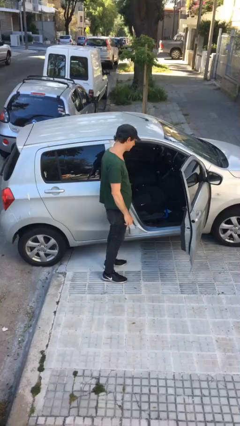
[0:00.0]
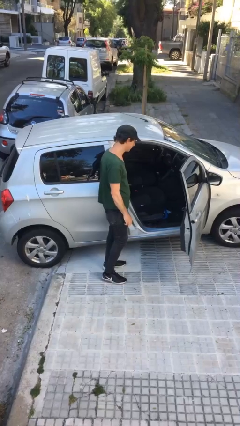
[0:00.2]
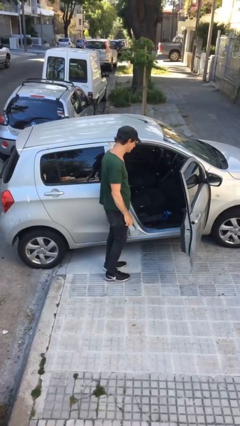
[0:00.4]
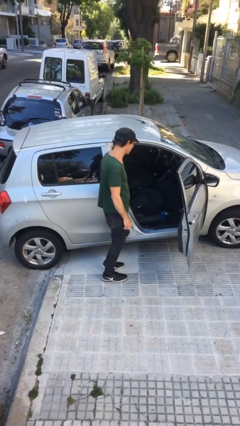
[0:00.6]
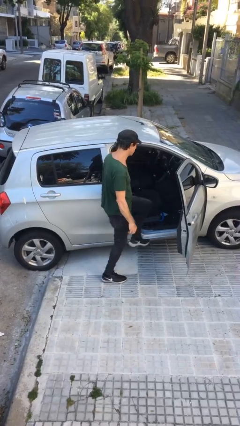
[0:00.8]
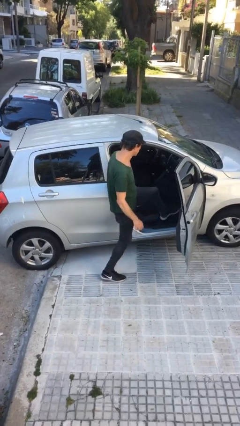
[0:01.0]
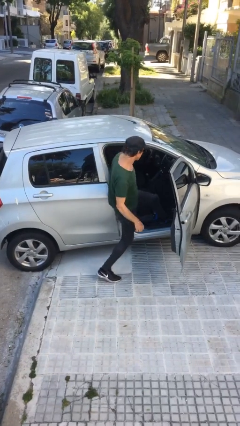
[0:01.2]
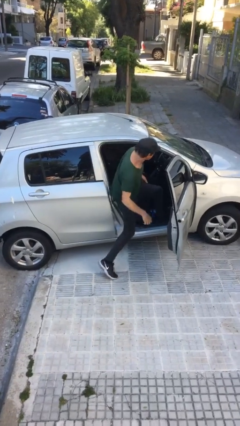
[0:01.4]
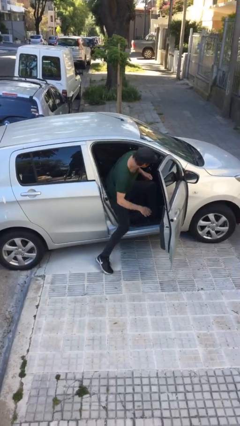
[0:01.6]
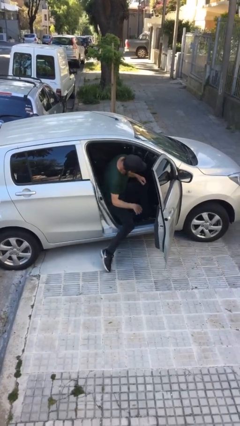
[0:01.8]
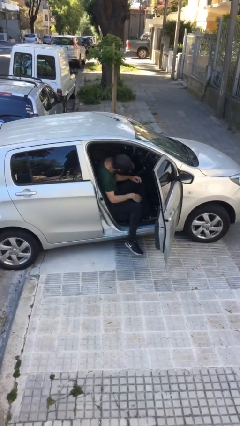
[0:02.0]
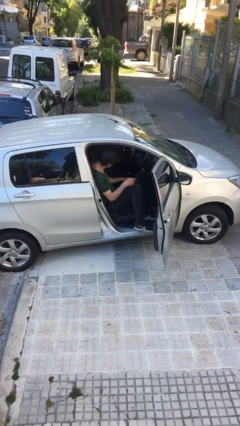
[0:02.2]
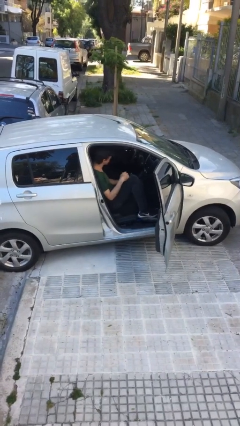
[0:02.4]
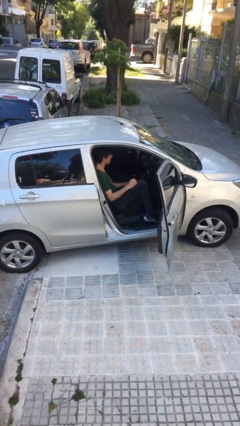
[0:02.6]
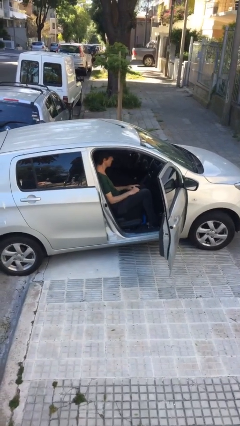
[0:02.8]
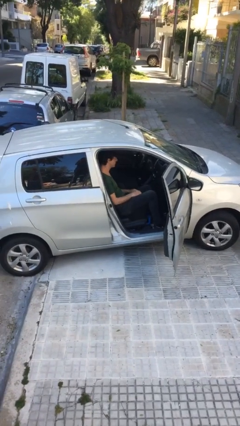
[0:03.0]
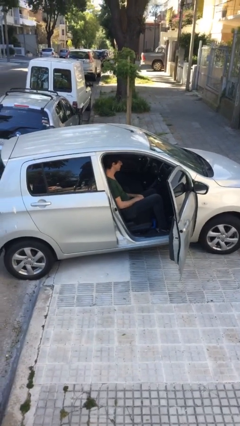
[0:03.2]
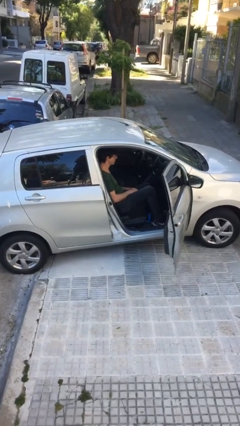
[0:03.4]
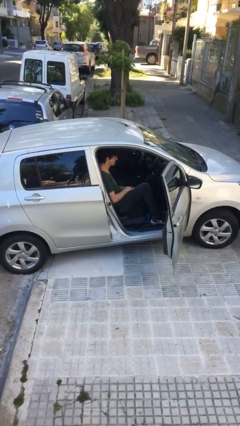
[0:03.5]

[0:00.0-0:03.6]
person enters car

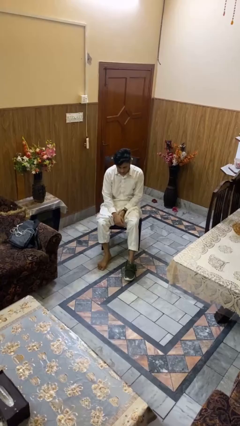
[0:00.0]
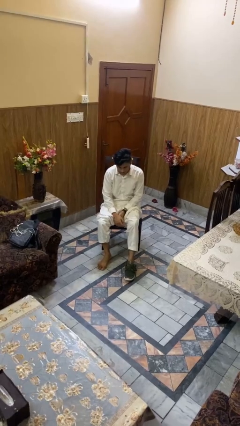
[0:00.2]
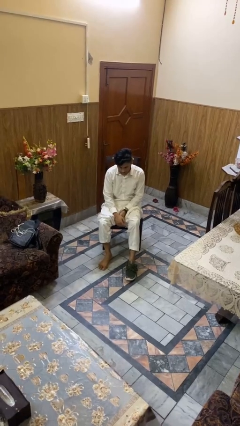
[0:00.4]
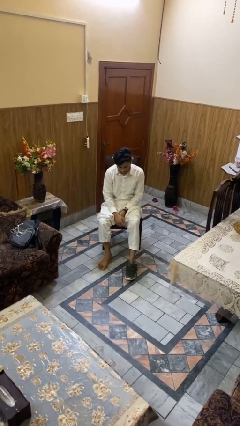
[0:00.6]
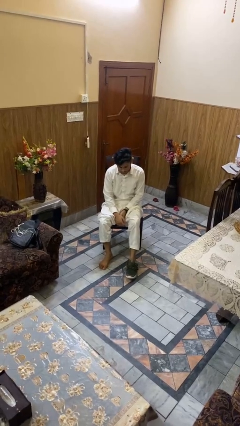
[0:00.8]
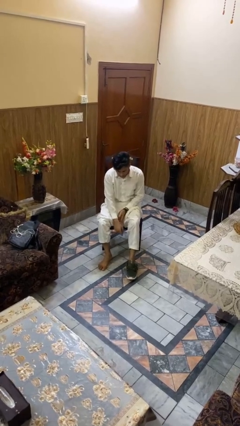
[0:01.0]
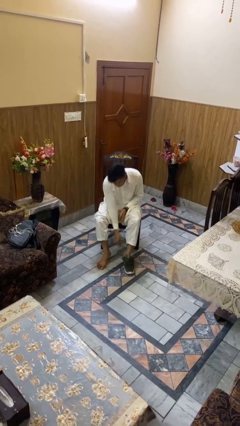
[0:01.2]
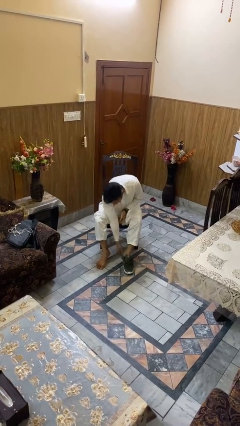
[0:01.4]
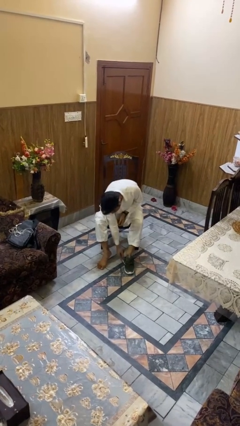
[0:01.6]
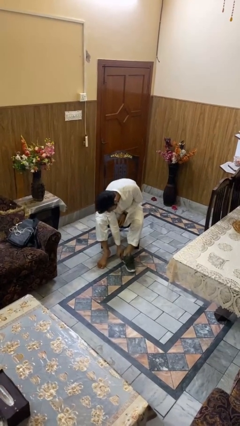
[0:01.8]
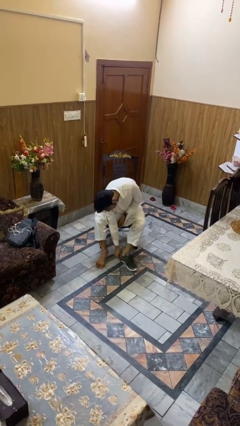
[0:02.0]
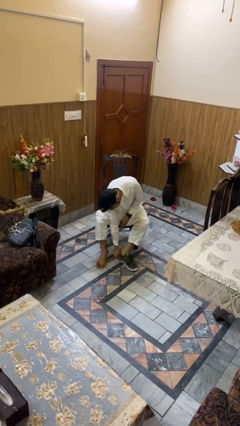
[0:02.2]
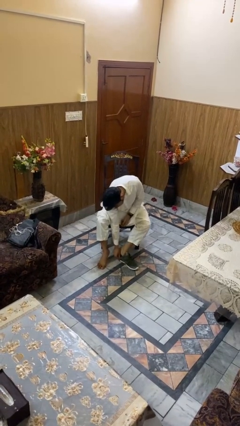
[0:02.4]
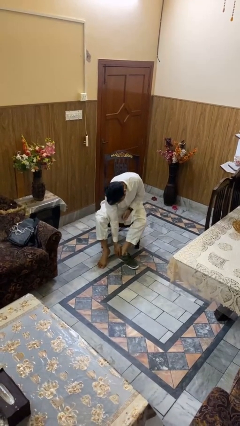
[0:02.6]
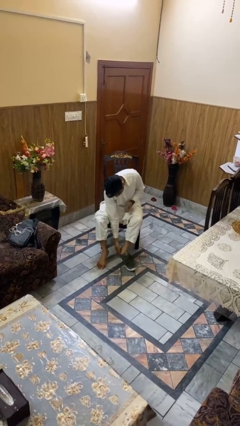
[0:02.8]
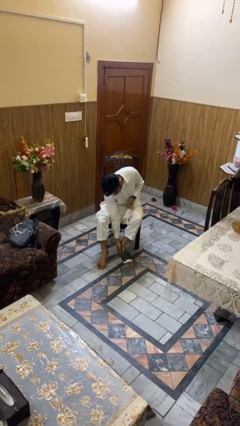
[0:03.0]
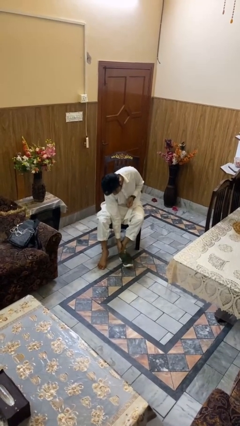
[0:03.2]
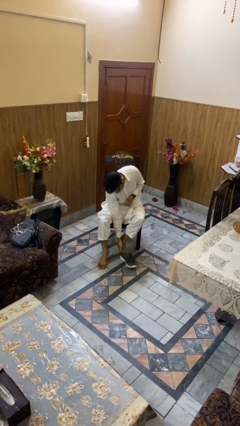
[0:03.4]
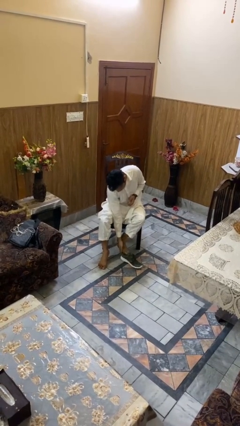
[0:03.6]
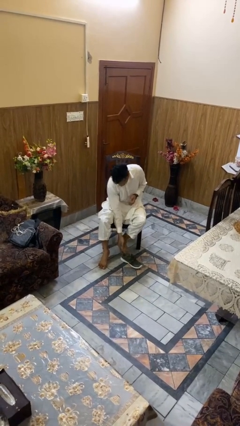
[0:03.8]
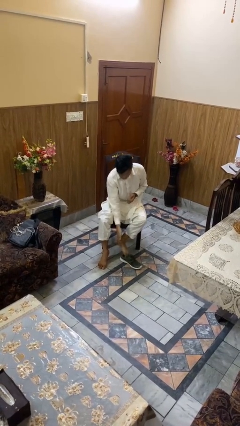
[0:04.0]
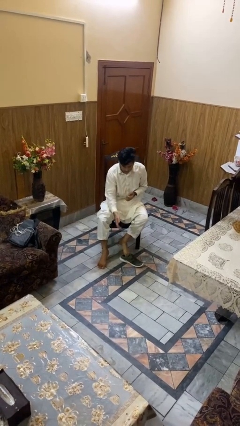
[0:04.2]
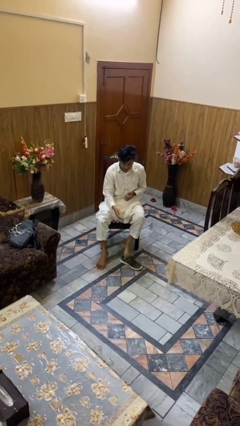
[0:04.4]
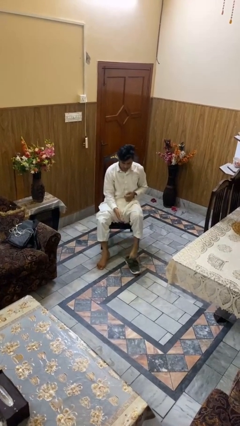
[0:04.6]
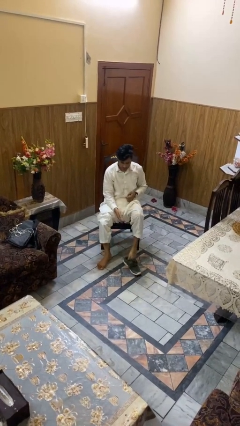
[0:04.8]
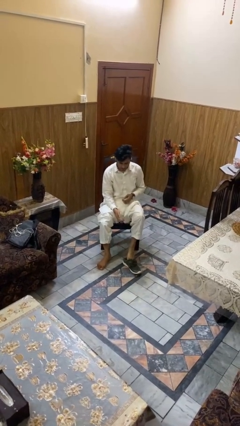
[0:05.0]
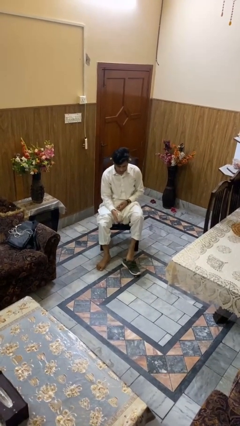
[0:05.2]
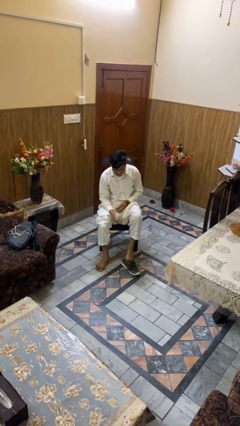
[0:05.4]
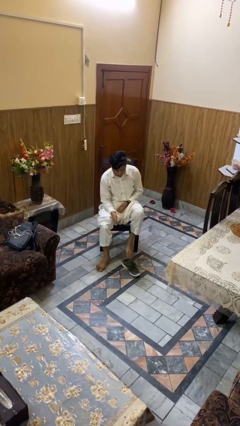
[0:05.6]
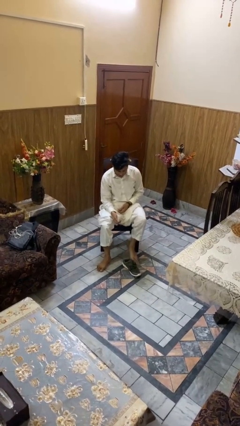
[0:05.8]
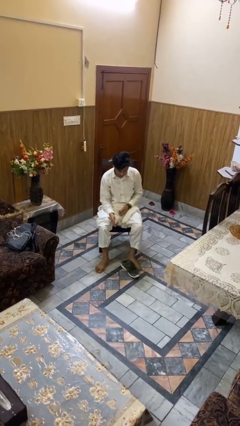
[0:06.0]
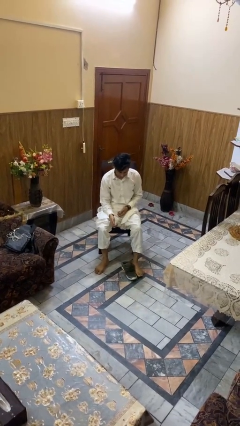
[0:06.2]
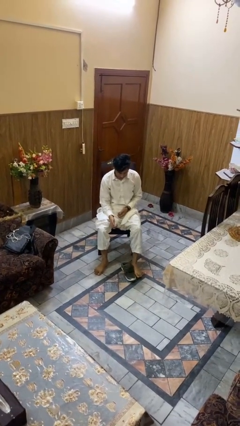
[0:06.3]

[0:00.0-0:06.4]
person takes off shoes

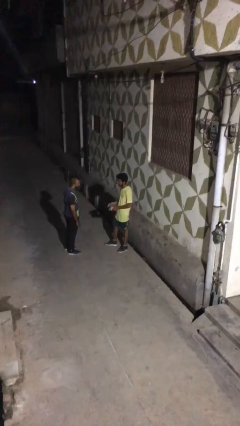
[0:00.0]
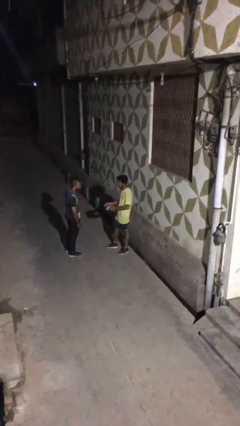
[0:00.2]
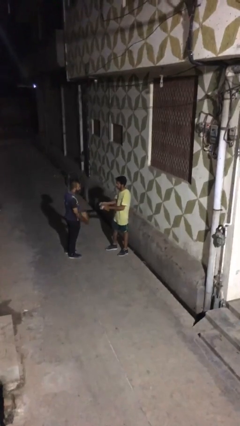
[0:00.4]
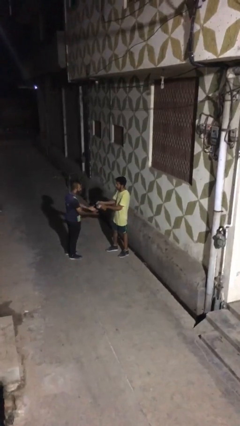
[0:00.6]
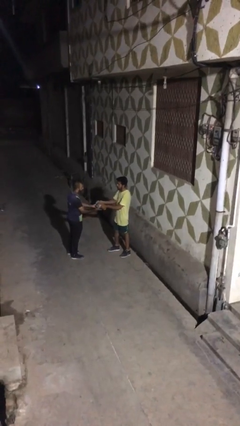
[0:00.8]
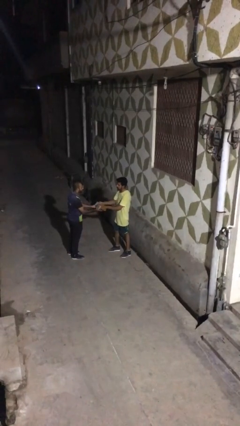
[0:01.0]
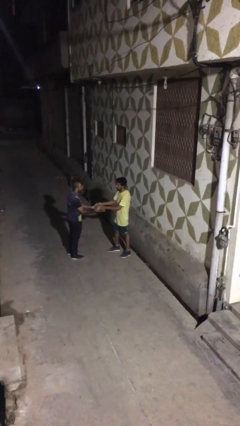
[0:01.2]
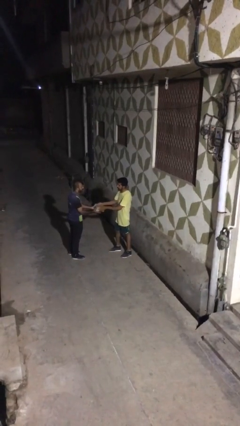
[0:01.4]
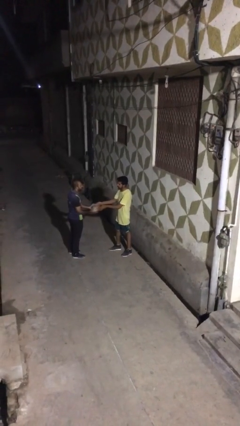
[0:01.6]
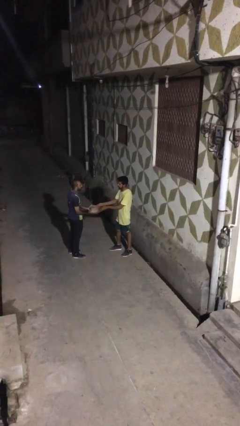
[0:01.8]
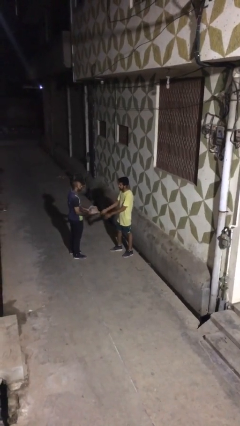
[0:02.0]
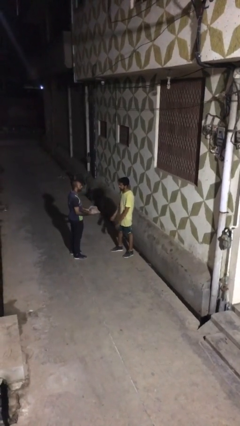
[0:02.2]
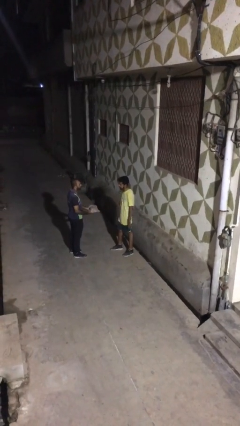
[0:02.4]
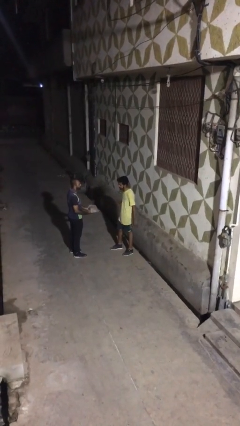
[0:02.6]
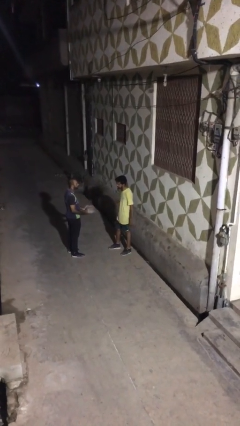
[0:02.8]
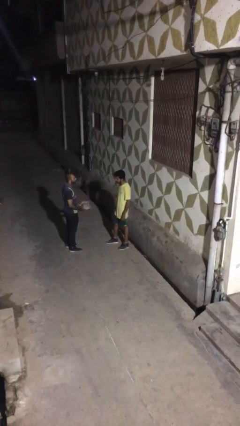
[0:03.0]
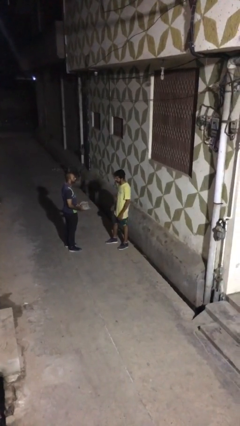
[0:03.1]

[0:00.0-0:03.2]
person transfers object to person

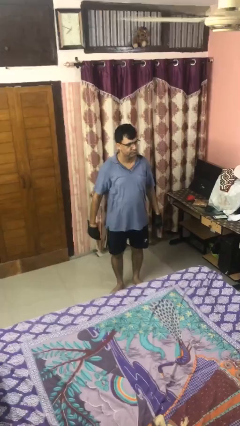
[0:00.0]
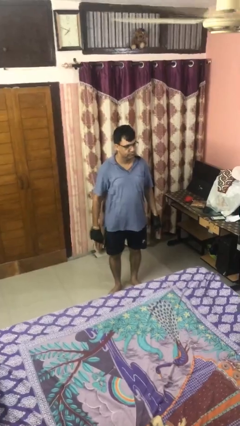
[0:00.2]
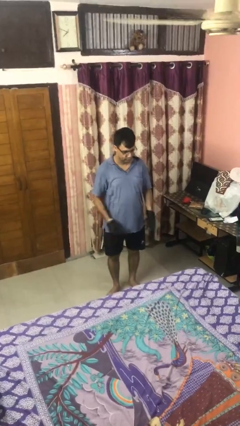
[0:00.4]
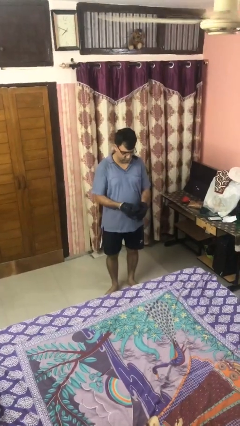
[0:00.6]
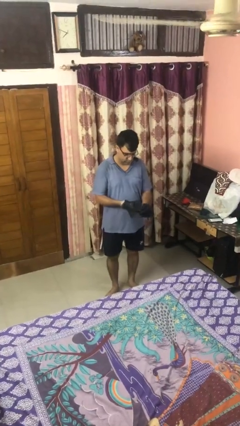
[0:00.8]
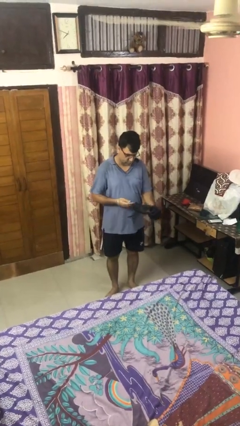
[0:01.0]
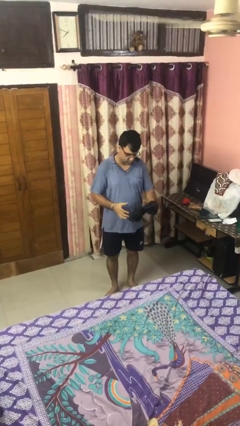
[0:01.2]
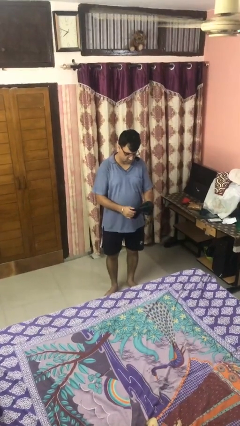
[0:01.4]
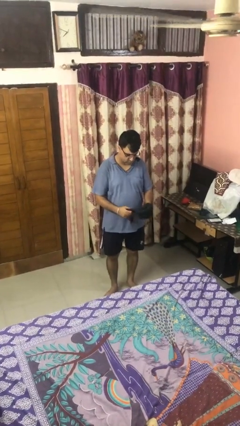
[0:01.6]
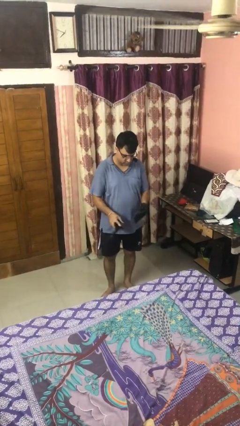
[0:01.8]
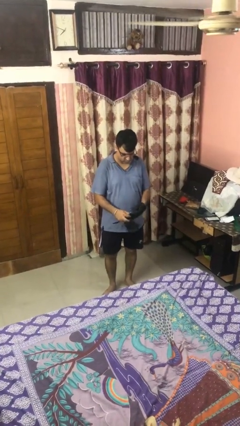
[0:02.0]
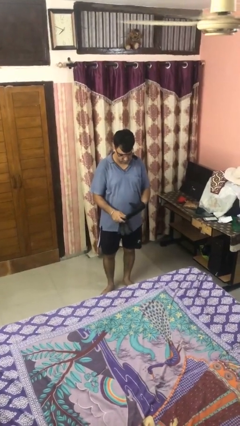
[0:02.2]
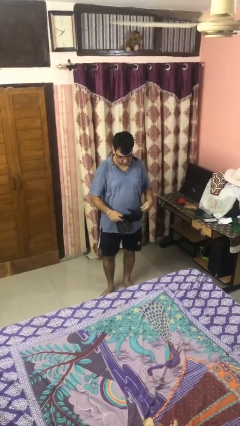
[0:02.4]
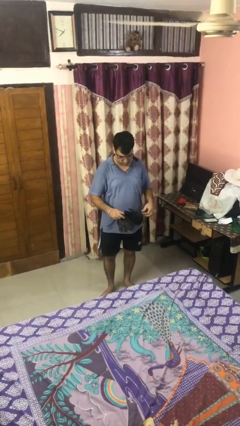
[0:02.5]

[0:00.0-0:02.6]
person takes off gloves

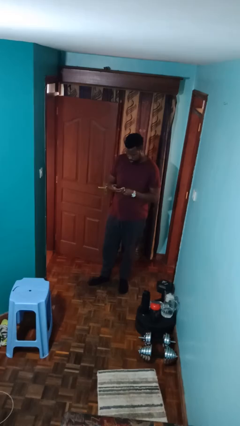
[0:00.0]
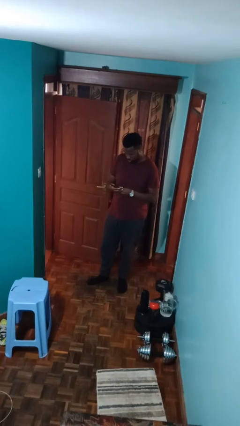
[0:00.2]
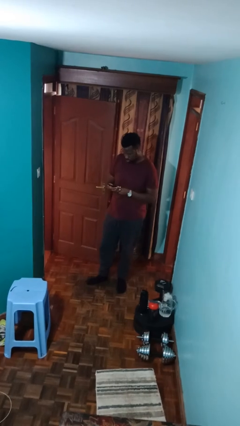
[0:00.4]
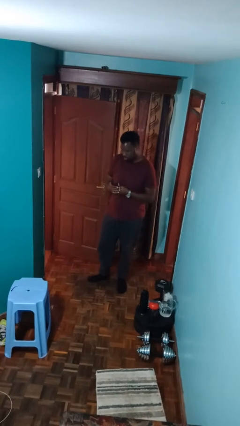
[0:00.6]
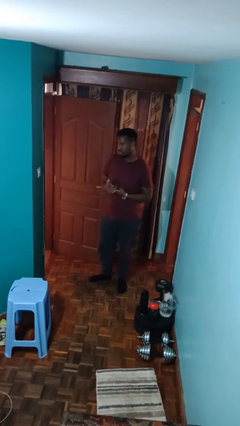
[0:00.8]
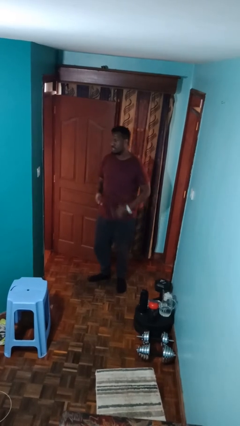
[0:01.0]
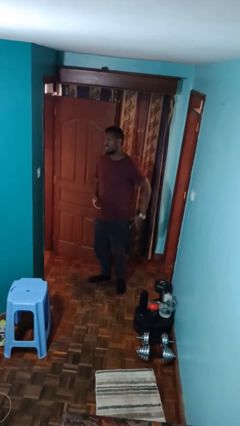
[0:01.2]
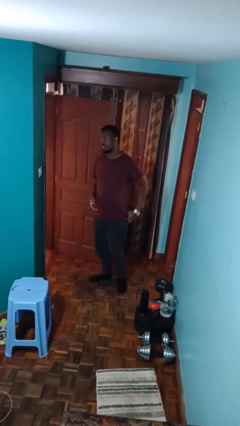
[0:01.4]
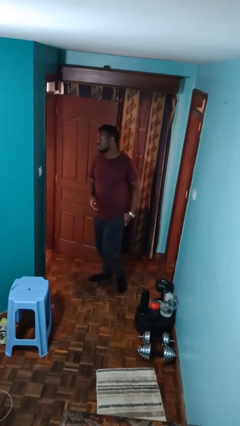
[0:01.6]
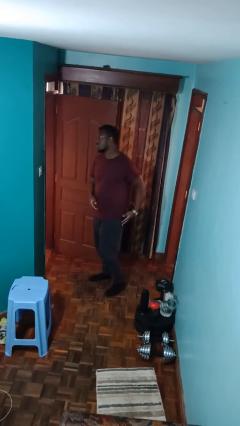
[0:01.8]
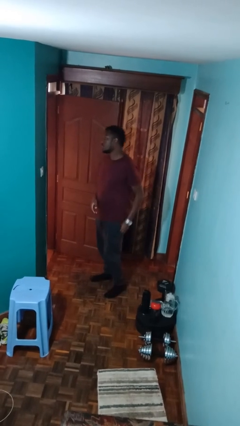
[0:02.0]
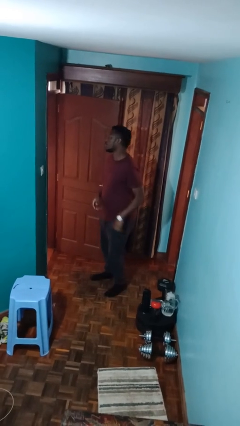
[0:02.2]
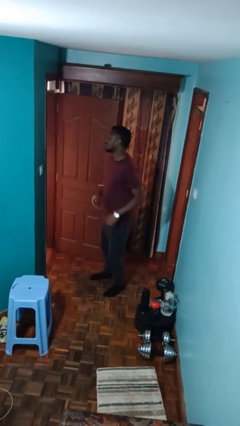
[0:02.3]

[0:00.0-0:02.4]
person puts phone into pocket
